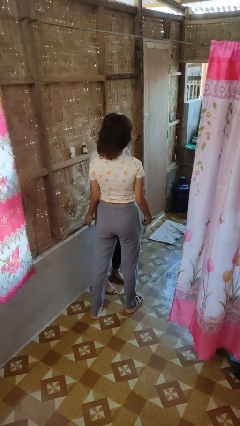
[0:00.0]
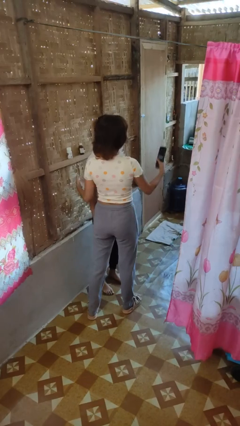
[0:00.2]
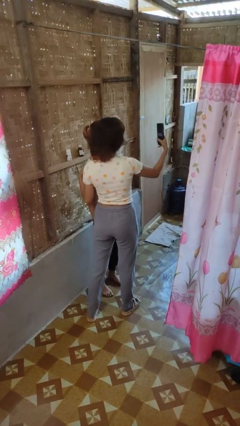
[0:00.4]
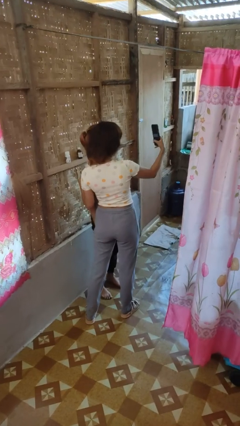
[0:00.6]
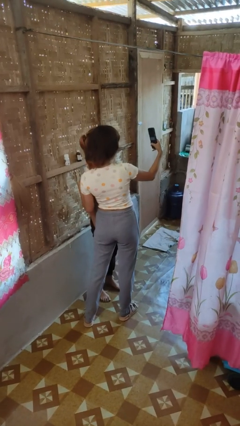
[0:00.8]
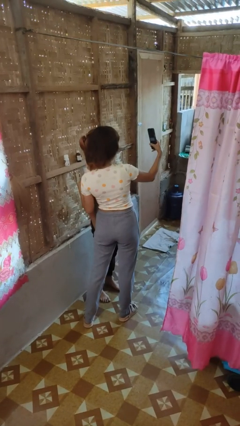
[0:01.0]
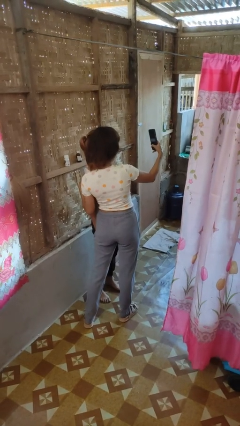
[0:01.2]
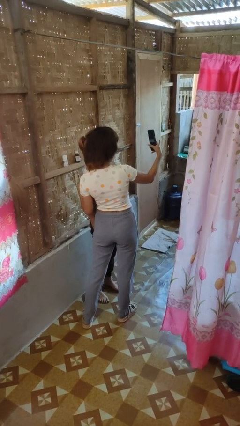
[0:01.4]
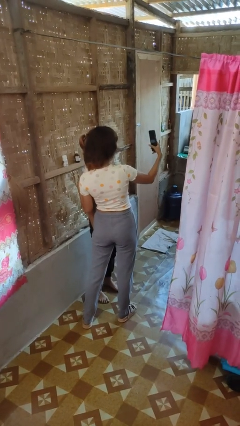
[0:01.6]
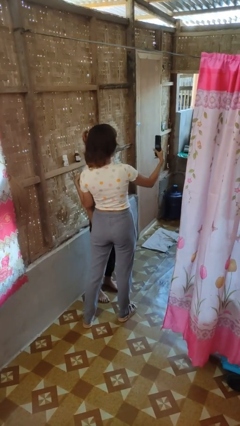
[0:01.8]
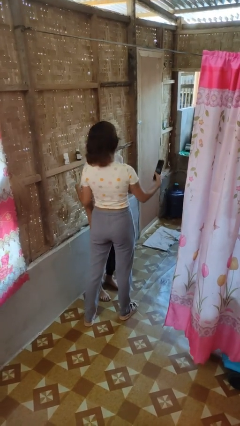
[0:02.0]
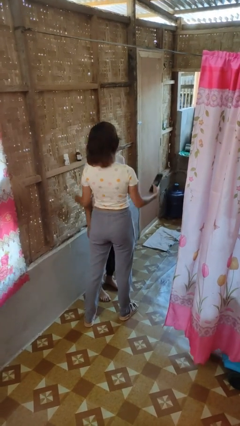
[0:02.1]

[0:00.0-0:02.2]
person takes selfie with person

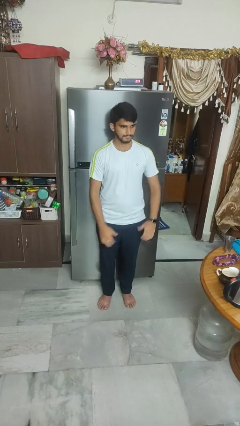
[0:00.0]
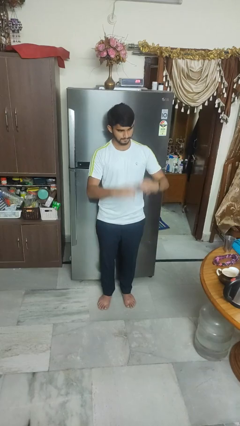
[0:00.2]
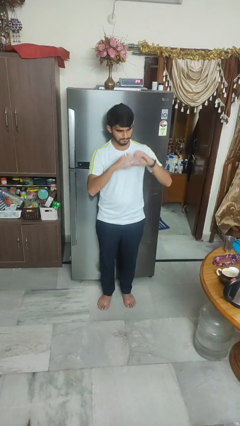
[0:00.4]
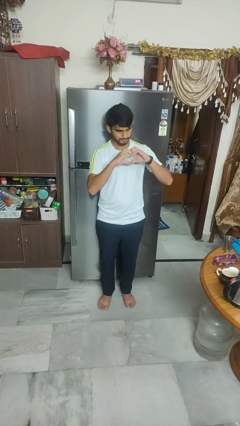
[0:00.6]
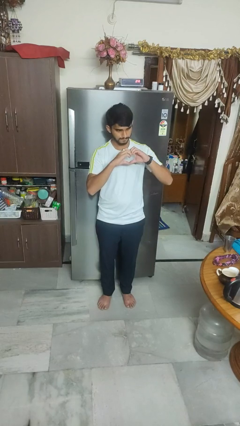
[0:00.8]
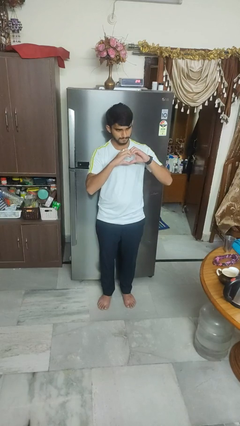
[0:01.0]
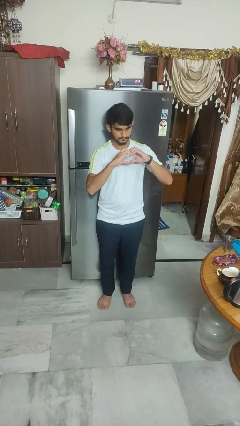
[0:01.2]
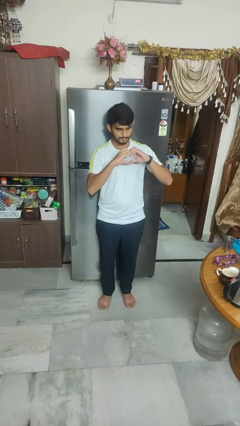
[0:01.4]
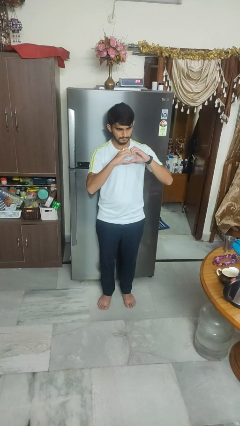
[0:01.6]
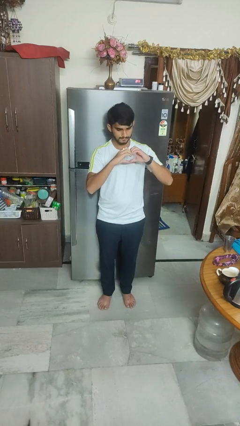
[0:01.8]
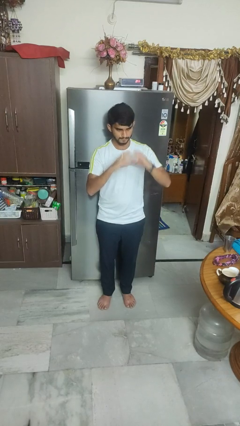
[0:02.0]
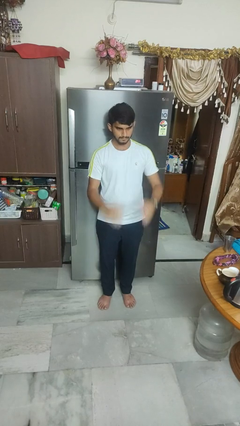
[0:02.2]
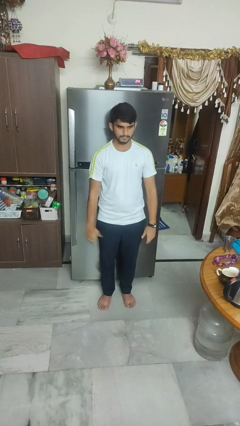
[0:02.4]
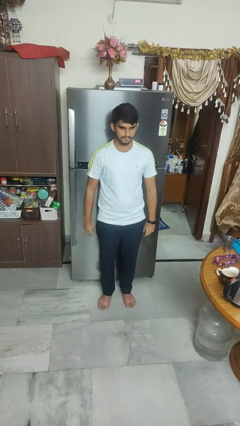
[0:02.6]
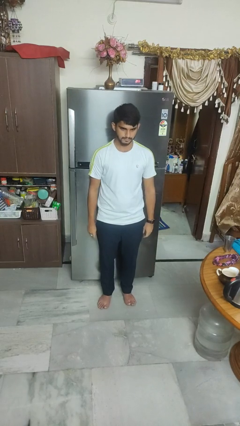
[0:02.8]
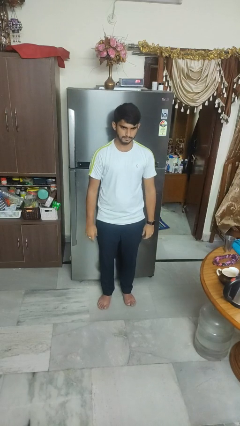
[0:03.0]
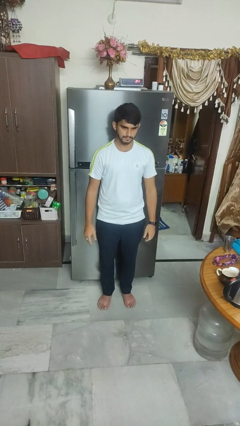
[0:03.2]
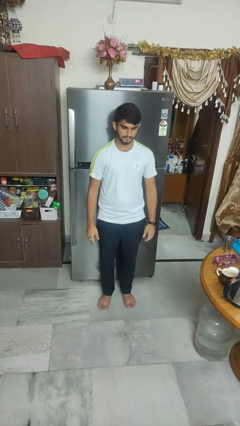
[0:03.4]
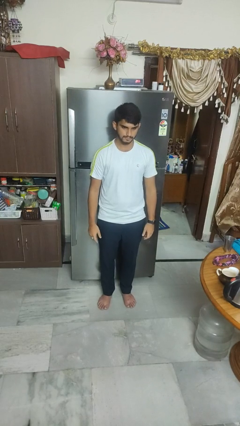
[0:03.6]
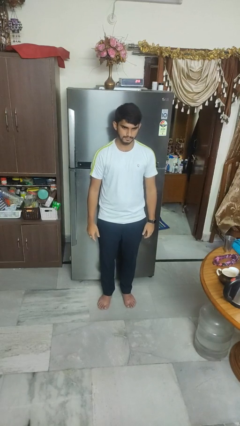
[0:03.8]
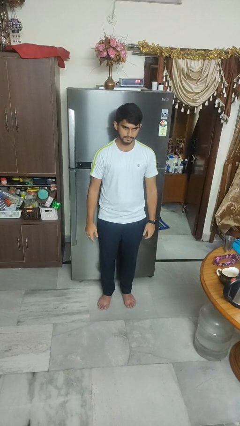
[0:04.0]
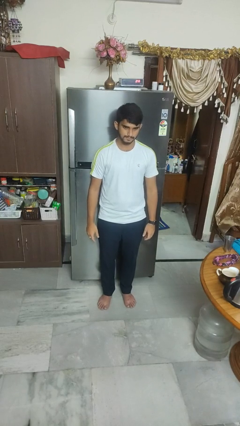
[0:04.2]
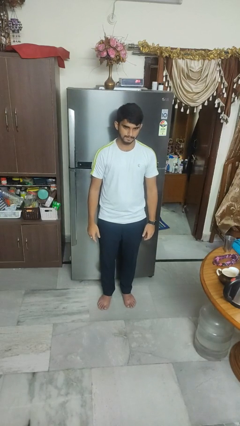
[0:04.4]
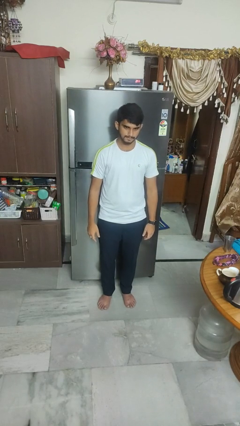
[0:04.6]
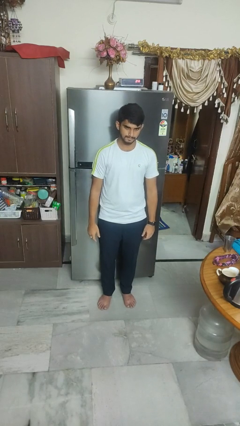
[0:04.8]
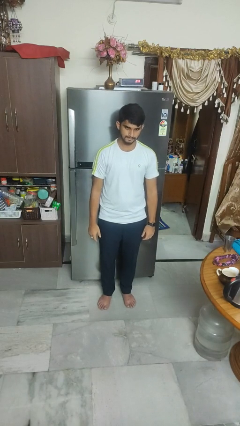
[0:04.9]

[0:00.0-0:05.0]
person gestures heart

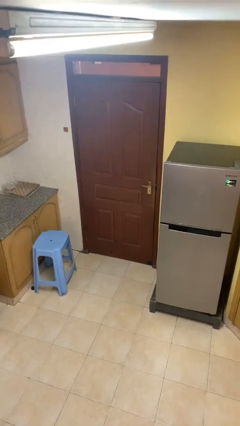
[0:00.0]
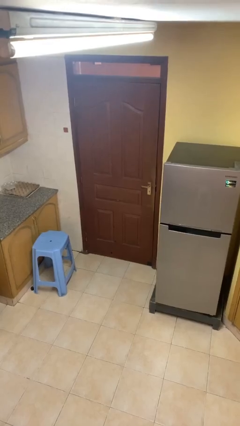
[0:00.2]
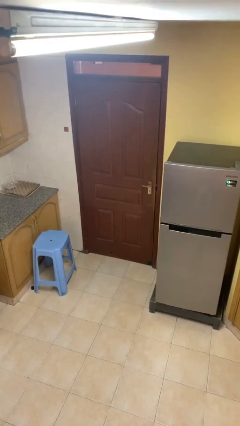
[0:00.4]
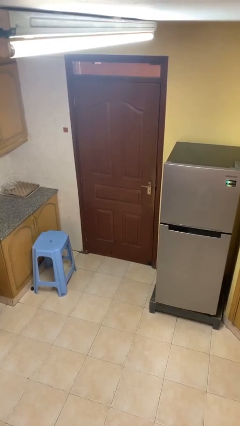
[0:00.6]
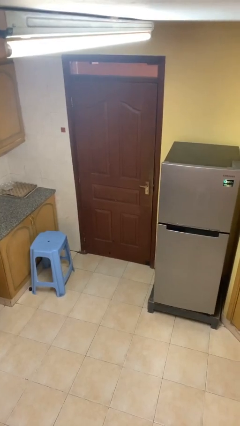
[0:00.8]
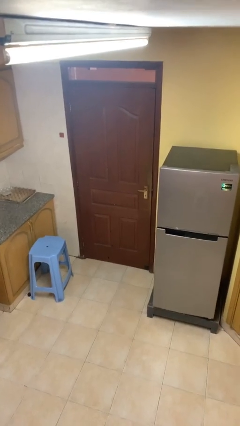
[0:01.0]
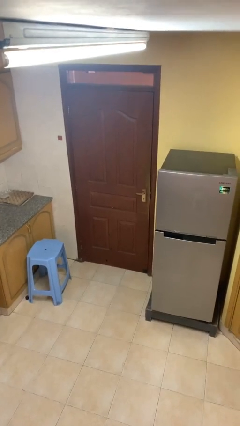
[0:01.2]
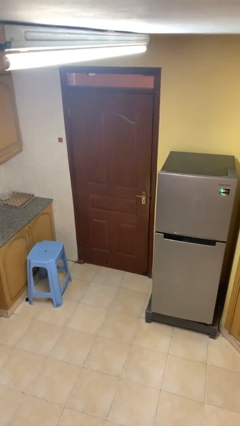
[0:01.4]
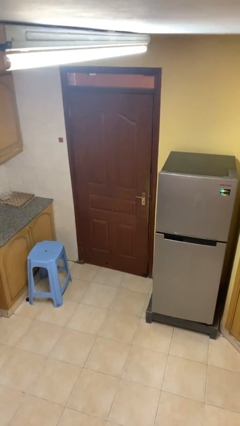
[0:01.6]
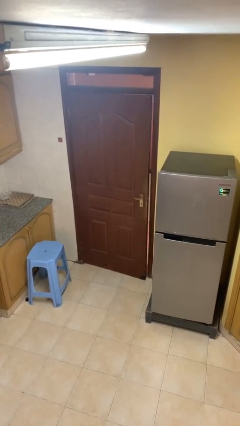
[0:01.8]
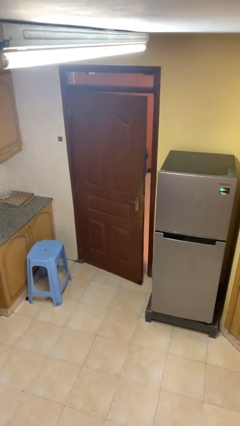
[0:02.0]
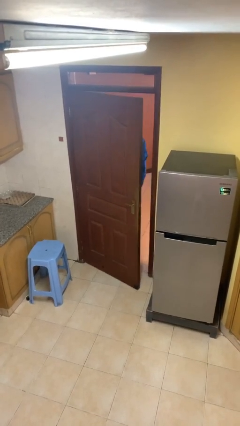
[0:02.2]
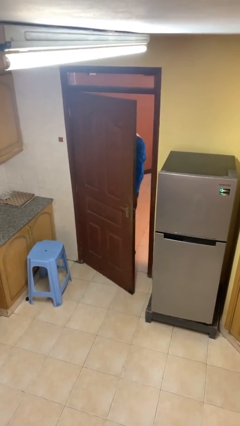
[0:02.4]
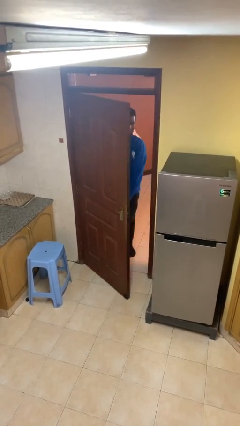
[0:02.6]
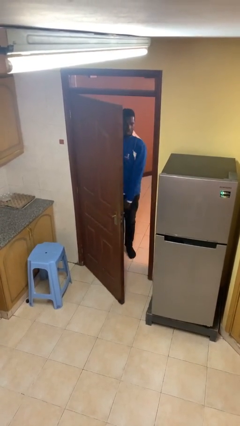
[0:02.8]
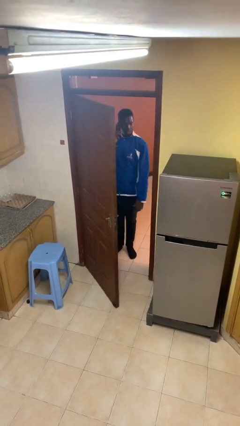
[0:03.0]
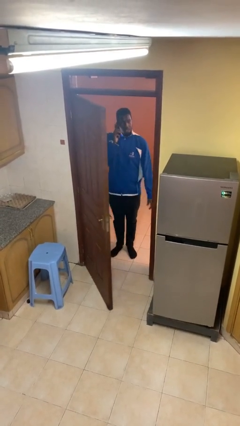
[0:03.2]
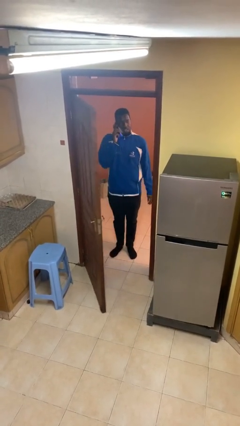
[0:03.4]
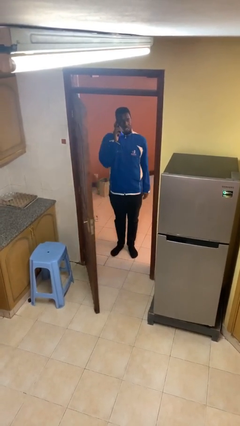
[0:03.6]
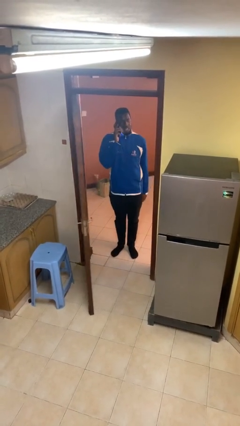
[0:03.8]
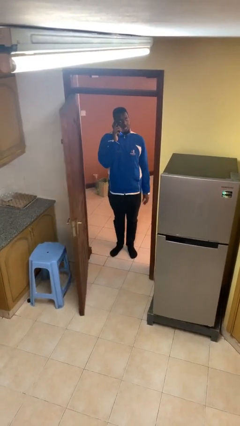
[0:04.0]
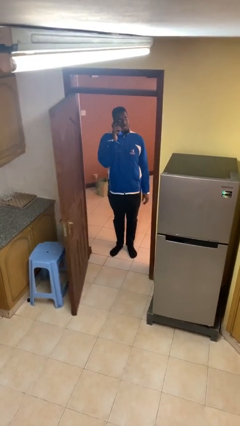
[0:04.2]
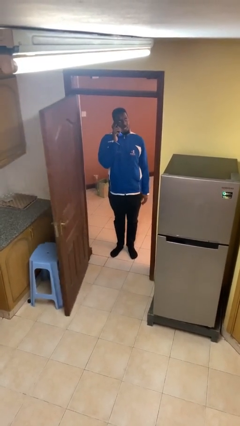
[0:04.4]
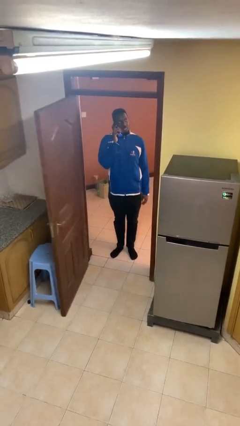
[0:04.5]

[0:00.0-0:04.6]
person opens facility door

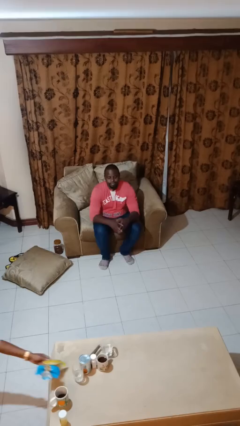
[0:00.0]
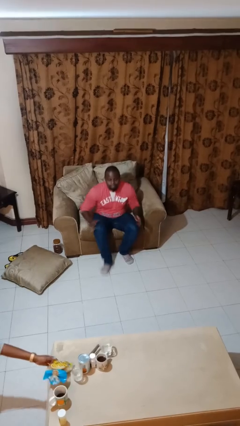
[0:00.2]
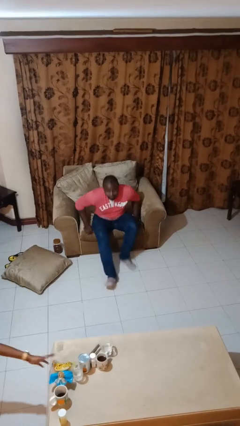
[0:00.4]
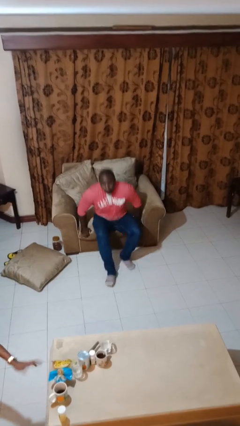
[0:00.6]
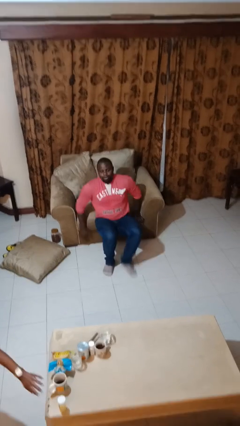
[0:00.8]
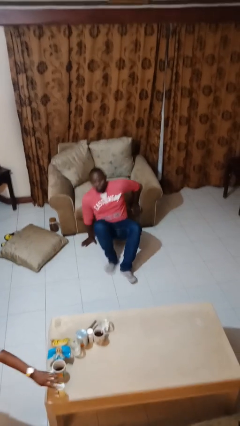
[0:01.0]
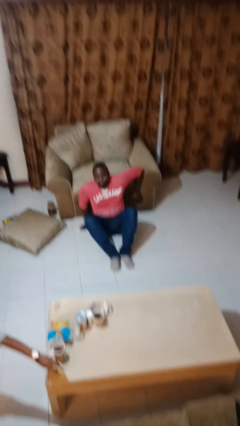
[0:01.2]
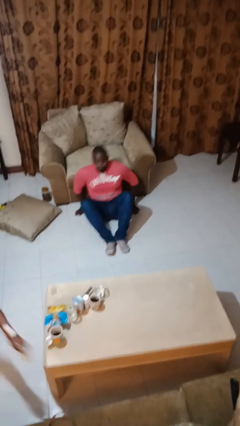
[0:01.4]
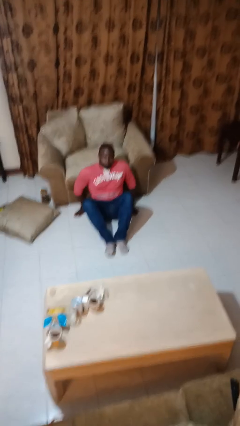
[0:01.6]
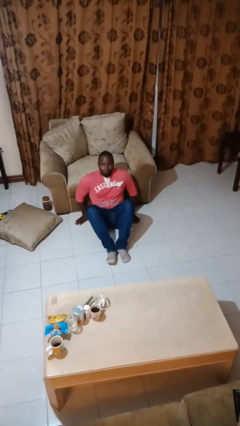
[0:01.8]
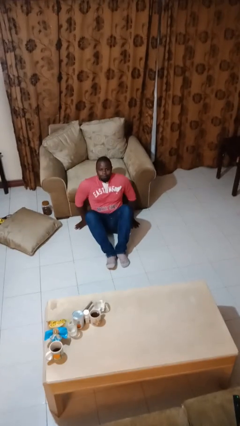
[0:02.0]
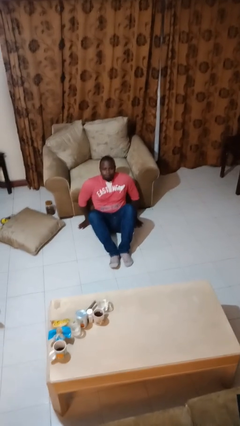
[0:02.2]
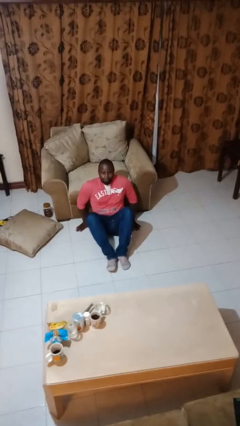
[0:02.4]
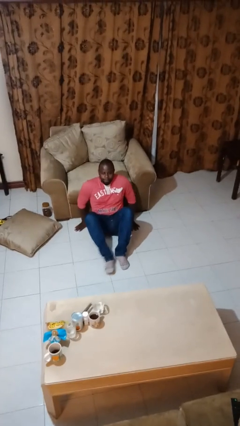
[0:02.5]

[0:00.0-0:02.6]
person falls from chair

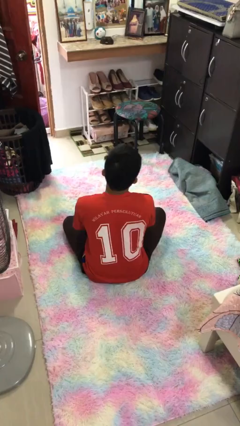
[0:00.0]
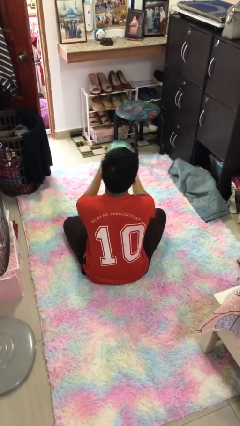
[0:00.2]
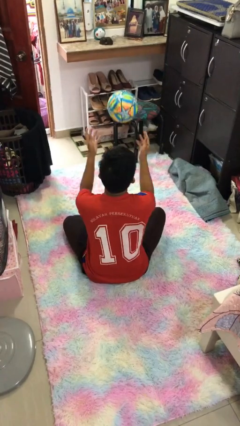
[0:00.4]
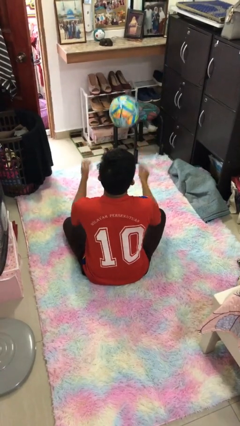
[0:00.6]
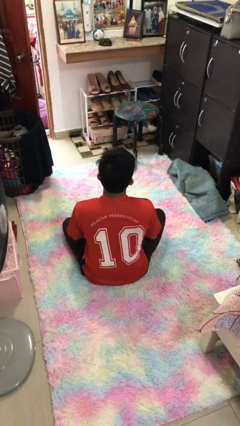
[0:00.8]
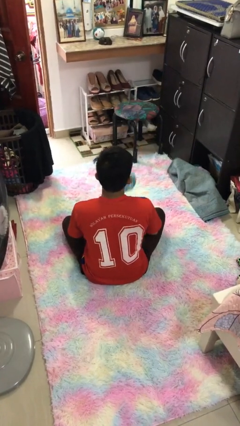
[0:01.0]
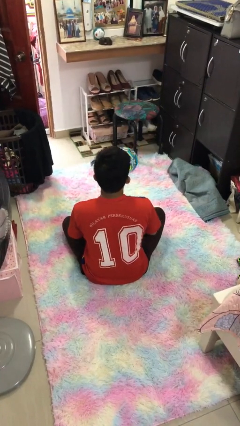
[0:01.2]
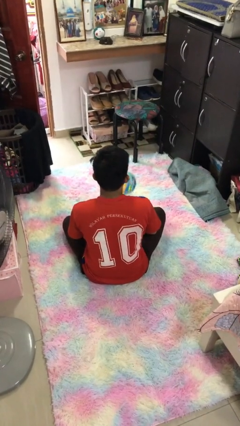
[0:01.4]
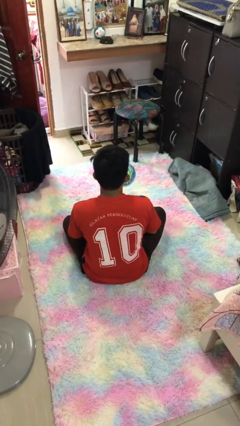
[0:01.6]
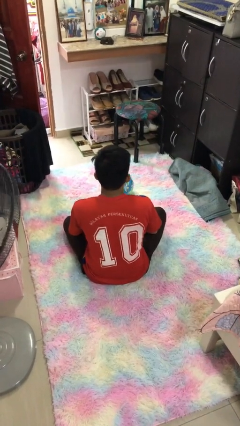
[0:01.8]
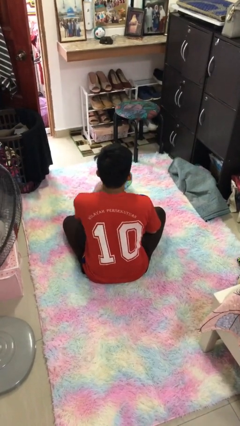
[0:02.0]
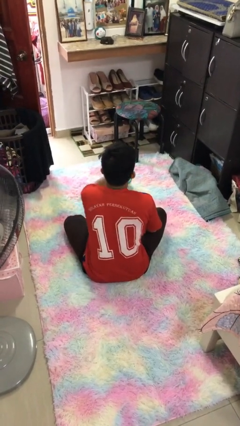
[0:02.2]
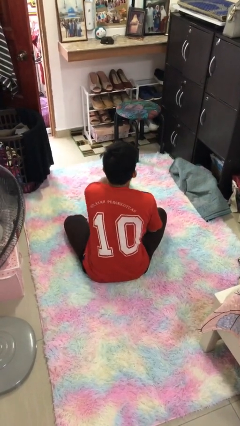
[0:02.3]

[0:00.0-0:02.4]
person bounces ball on floor

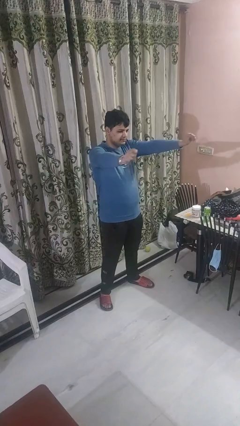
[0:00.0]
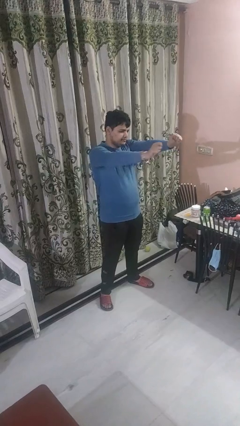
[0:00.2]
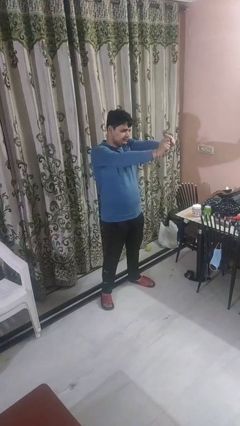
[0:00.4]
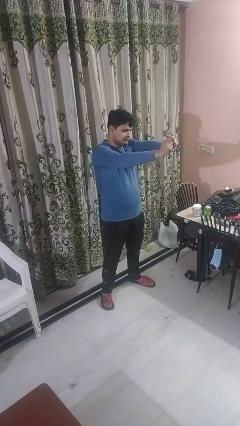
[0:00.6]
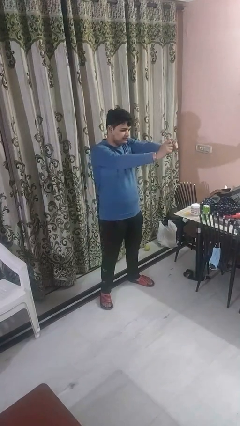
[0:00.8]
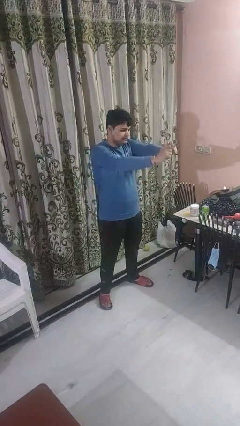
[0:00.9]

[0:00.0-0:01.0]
person gestures zoom out
